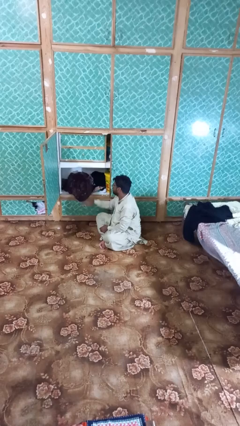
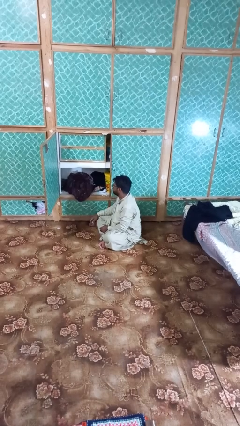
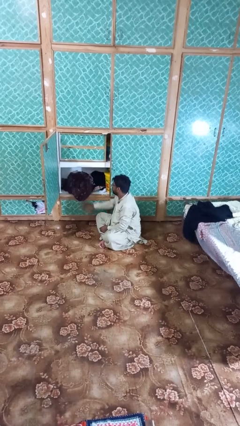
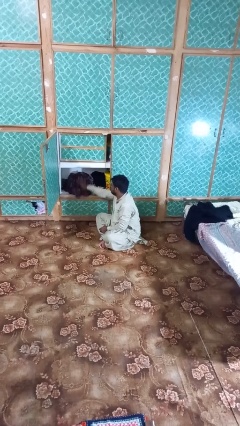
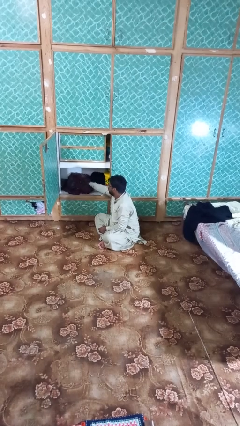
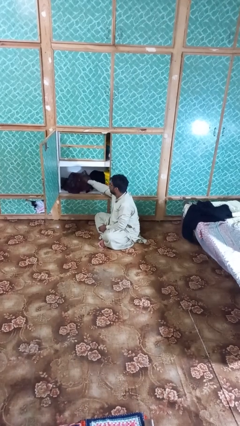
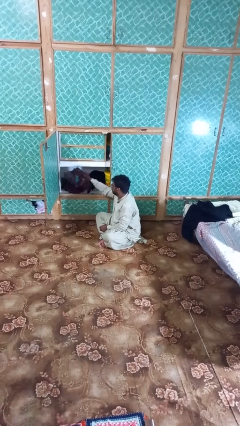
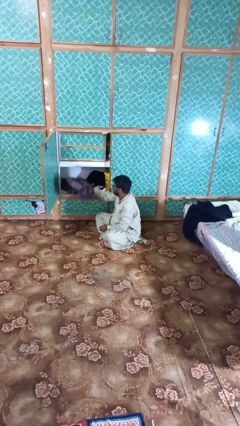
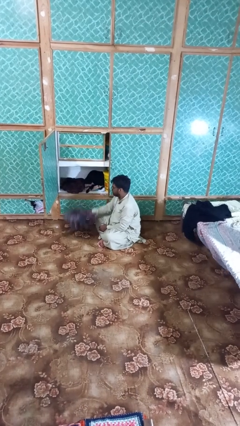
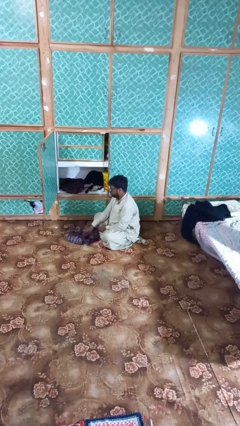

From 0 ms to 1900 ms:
person takes clothes from dresser

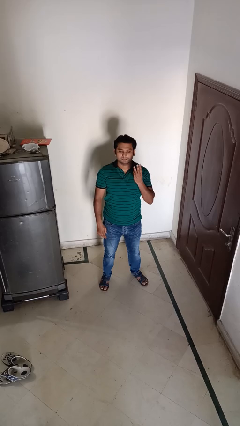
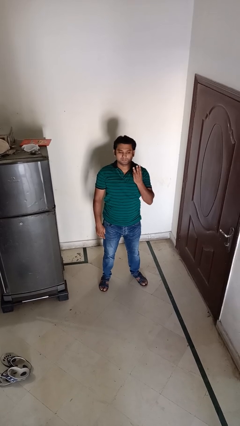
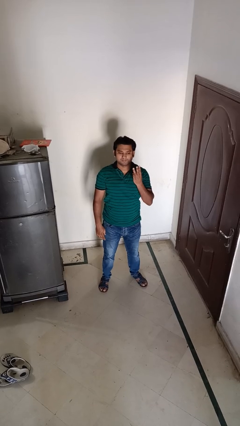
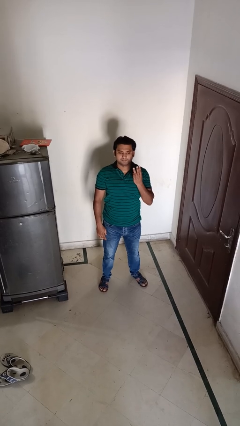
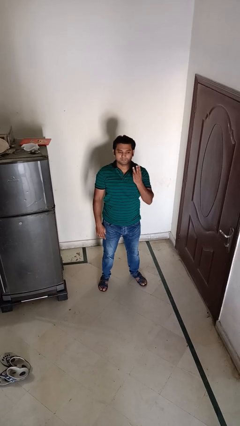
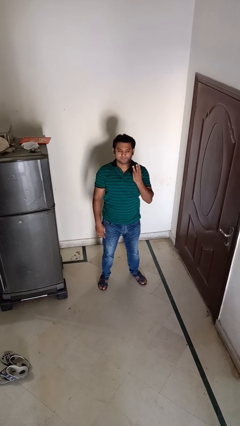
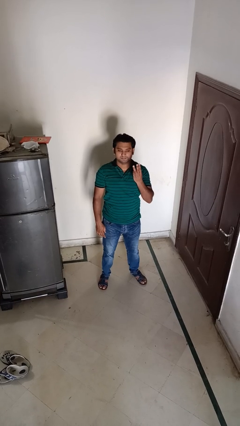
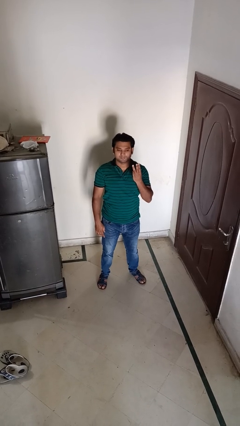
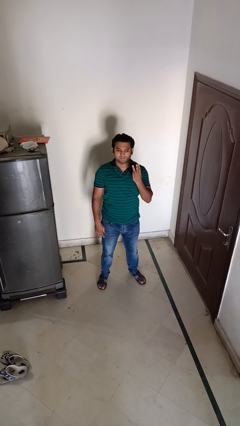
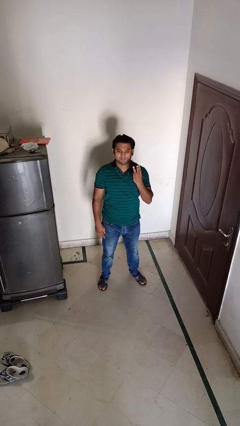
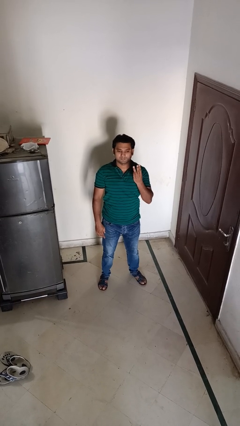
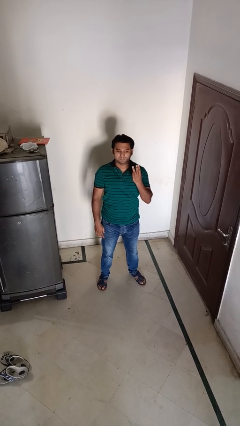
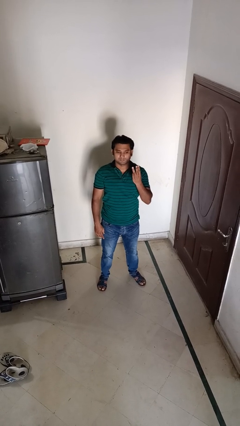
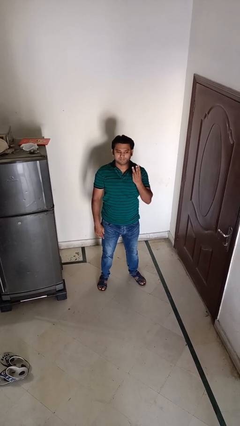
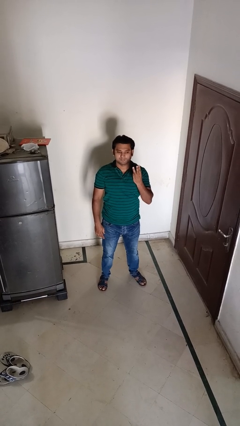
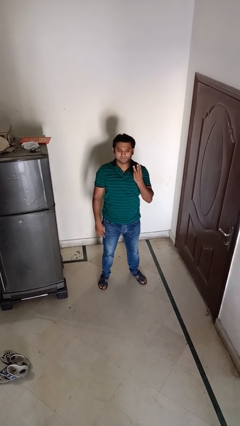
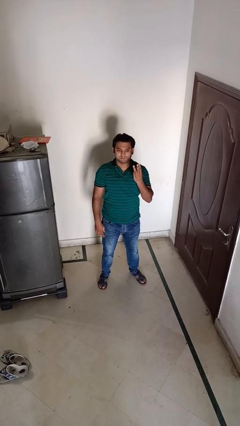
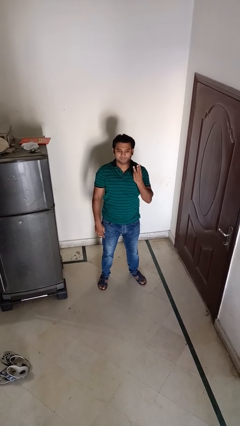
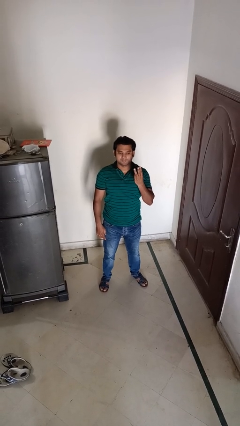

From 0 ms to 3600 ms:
person gestures number three

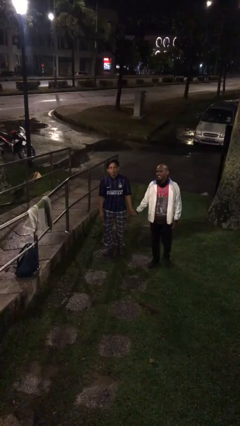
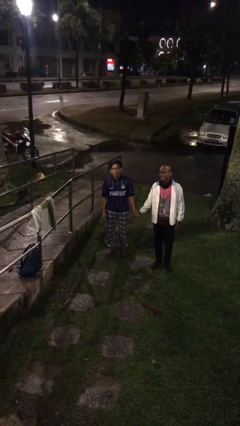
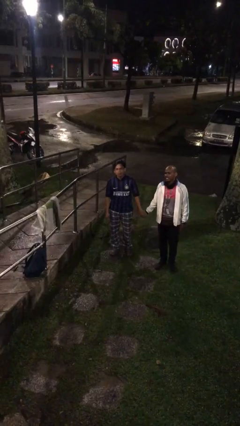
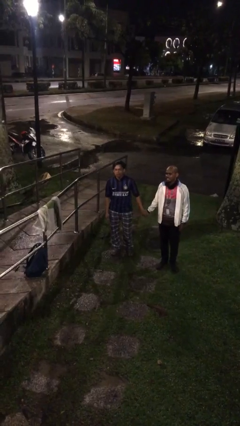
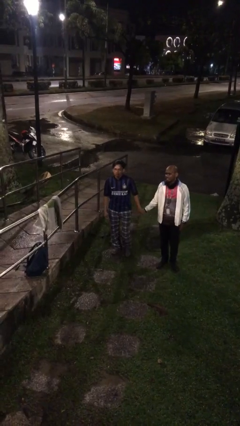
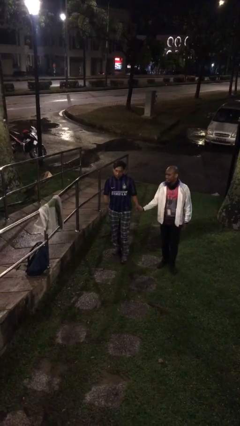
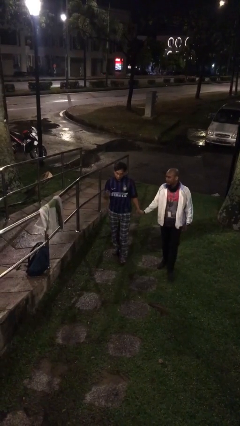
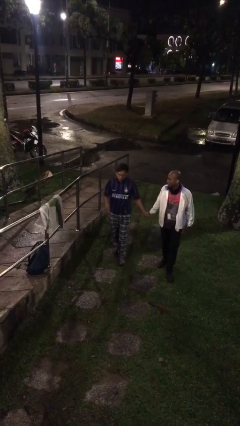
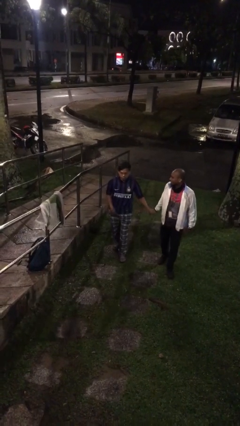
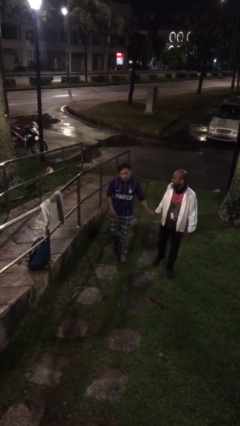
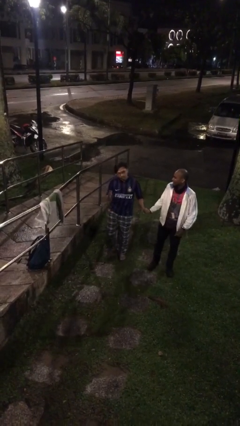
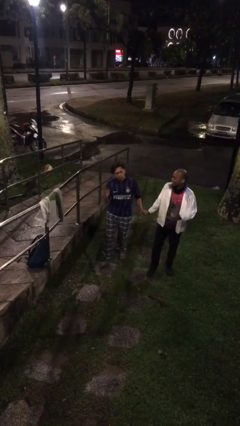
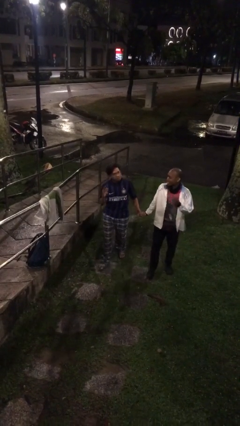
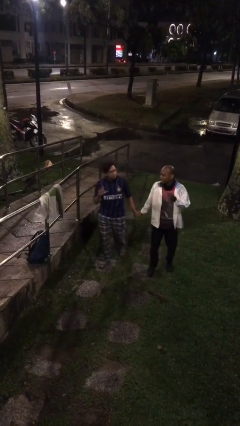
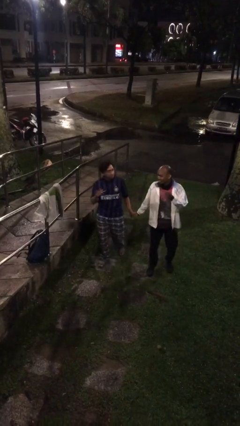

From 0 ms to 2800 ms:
person holds hand

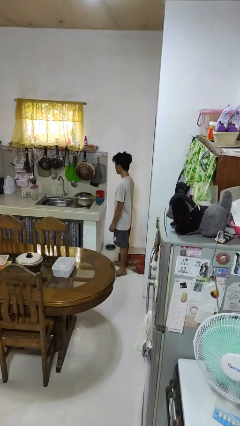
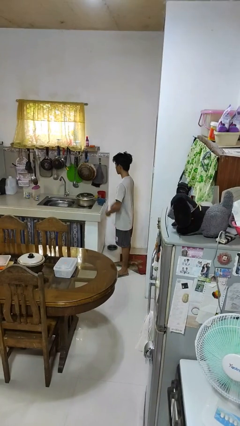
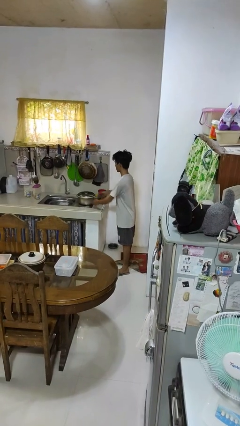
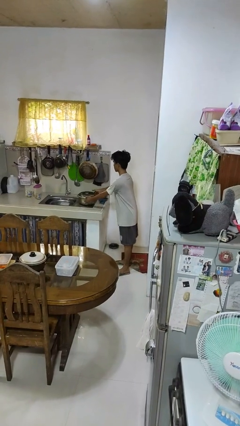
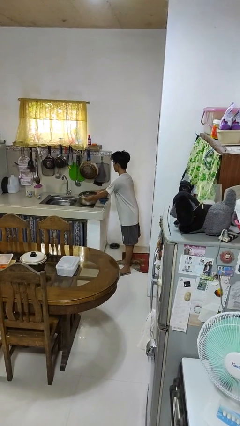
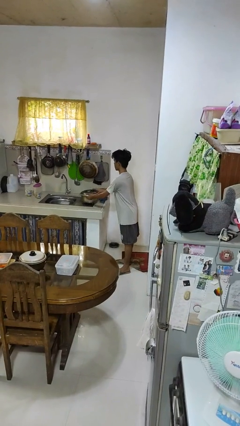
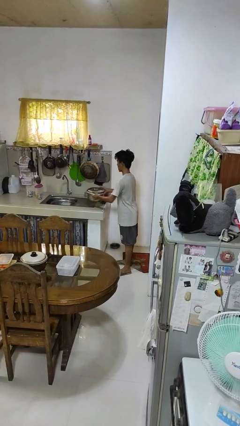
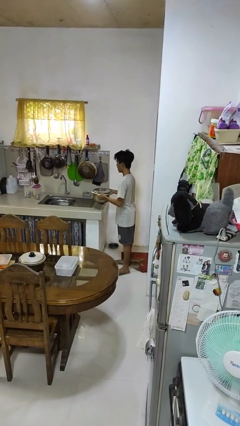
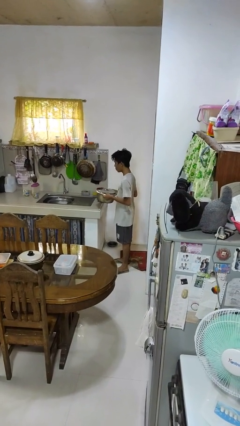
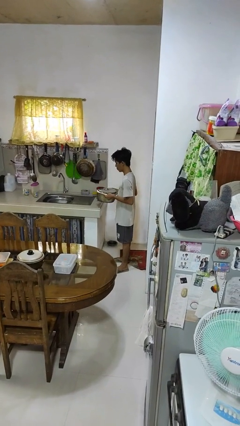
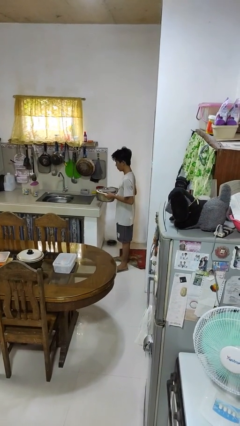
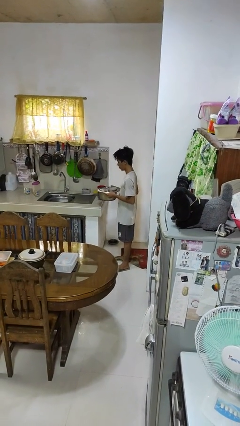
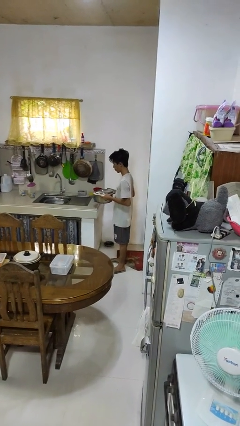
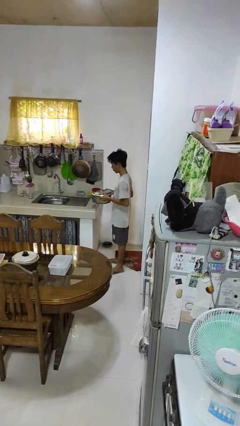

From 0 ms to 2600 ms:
person picks up object from countertop

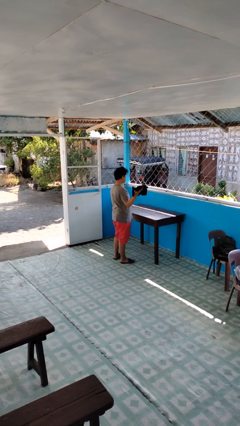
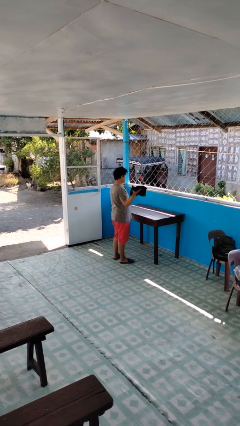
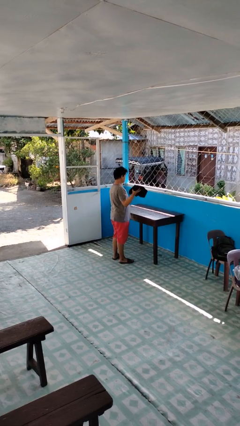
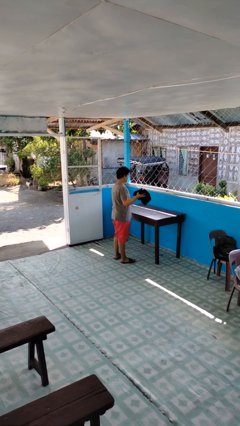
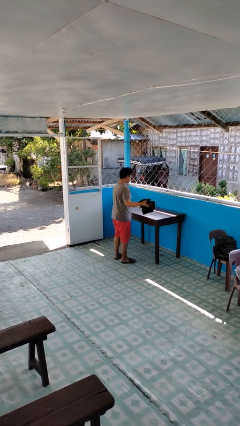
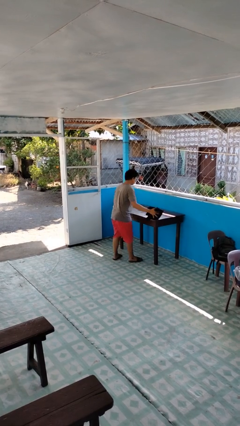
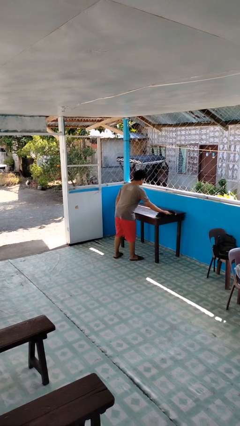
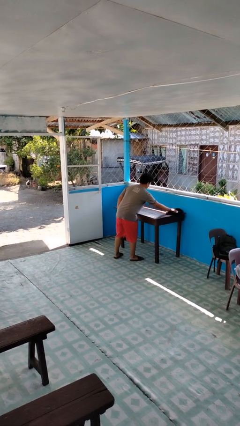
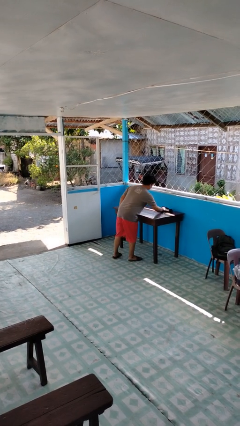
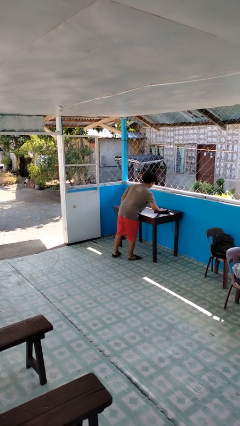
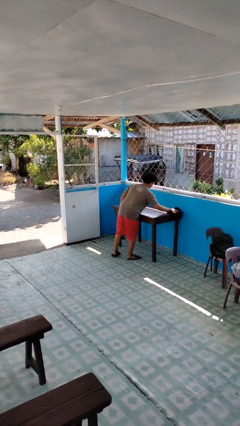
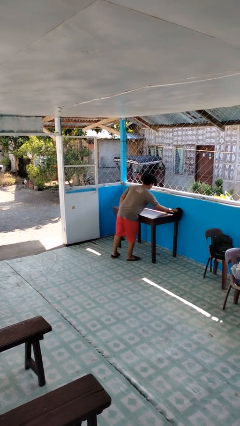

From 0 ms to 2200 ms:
person cleans table with rag

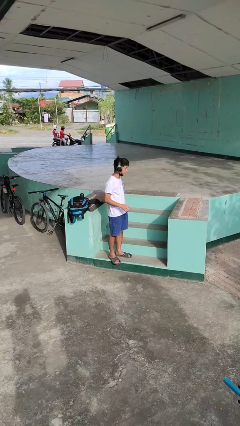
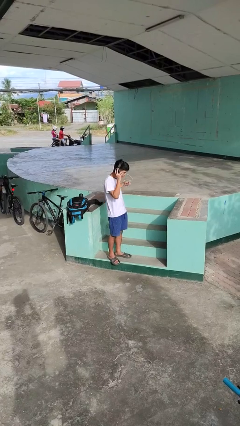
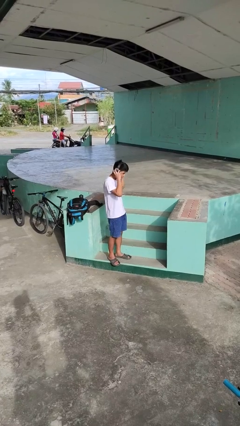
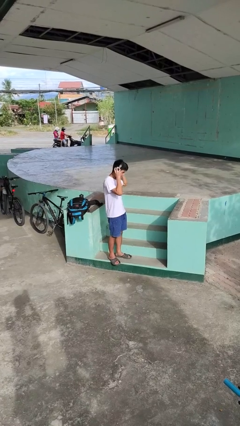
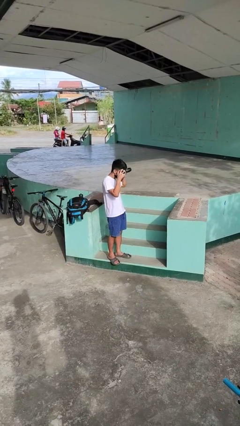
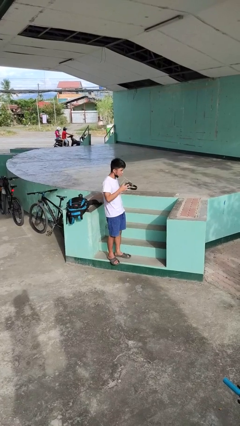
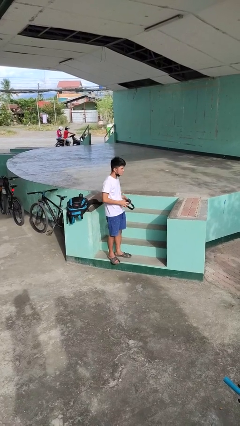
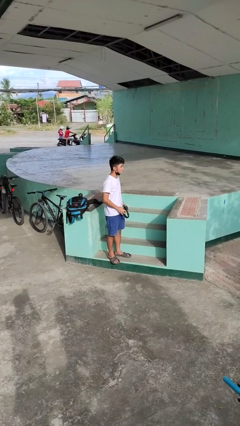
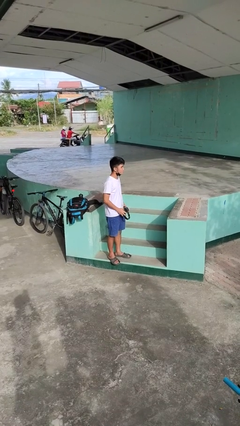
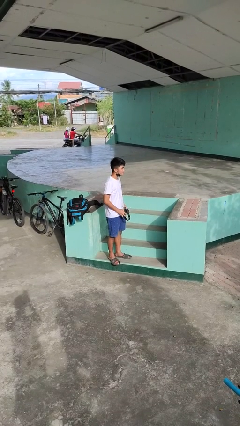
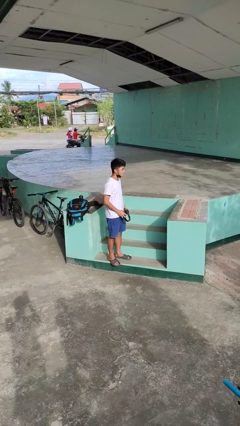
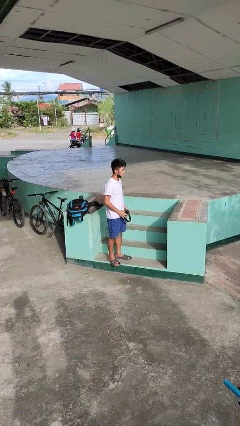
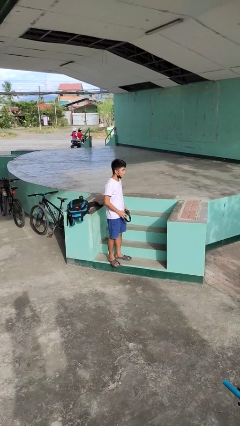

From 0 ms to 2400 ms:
person takes off headphones

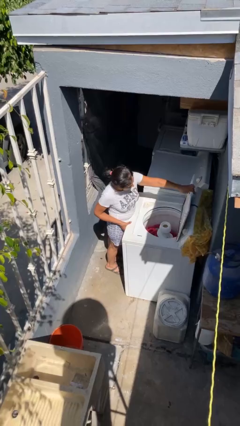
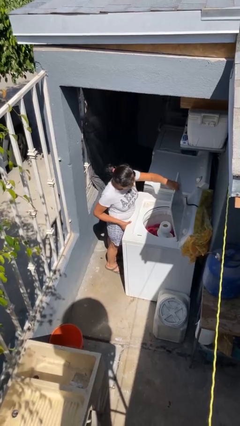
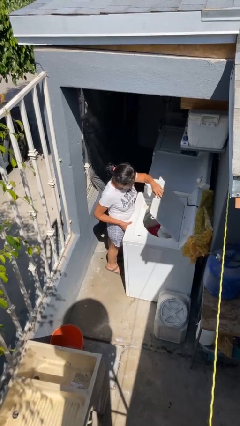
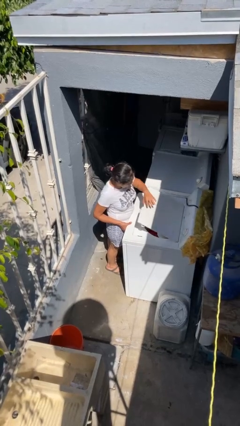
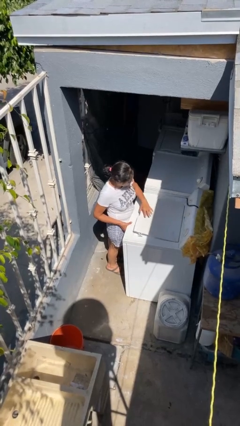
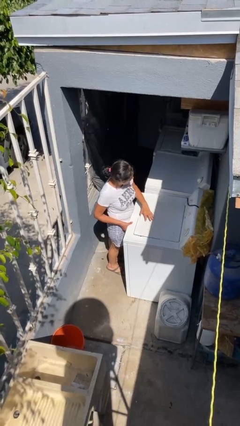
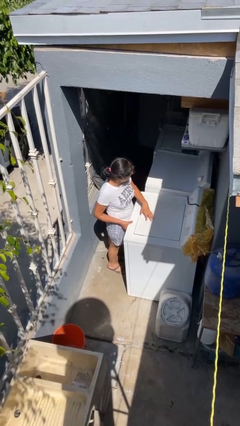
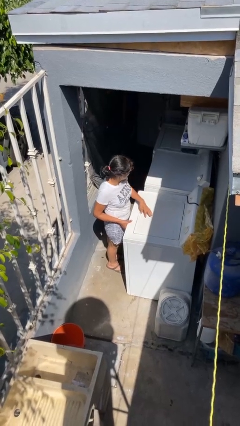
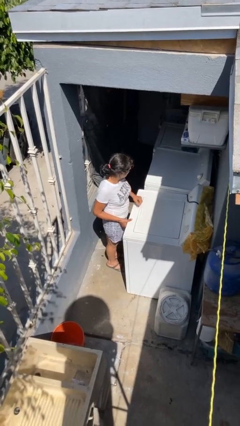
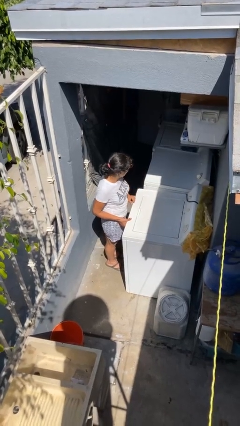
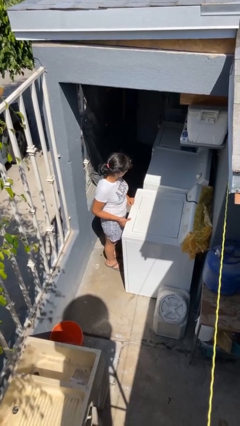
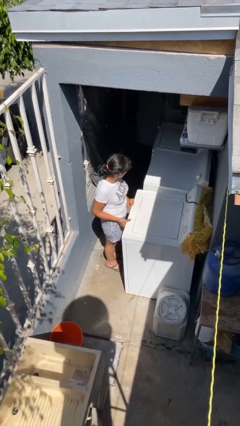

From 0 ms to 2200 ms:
person closes clothes washer
